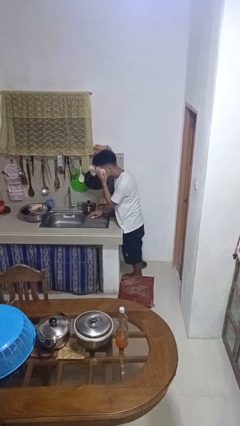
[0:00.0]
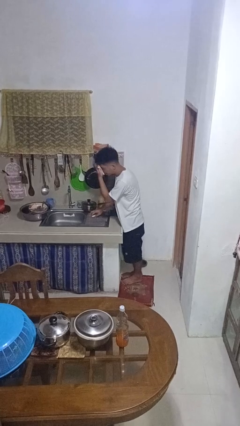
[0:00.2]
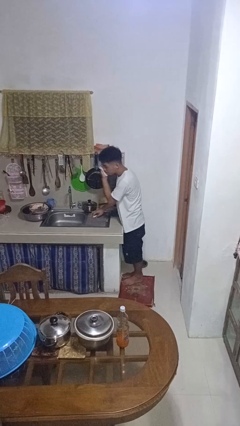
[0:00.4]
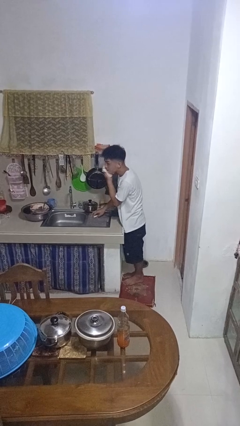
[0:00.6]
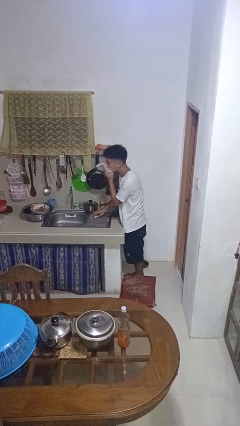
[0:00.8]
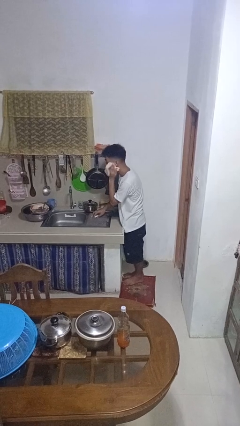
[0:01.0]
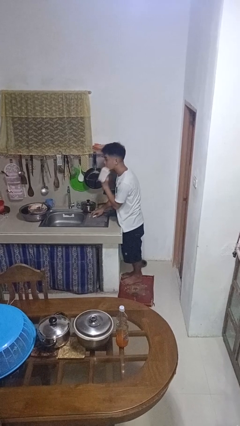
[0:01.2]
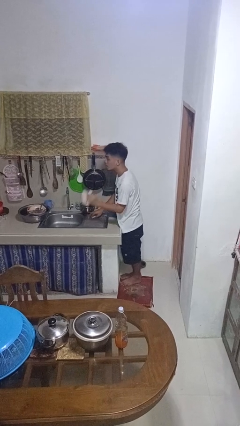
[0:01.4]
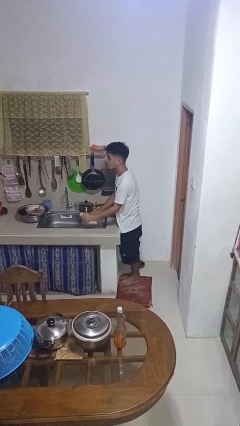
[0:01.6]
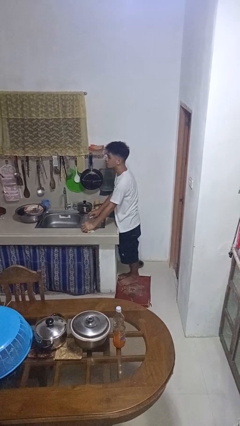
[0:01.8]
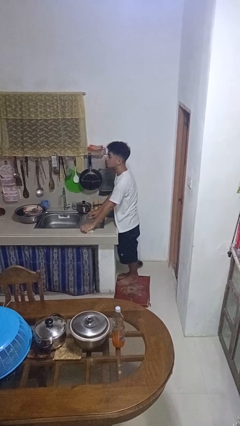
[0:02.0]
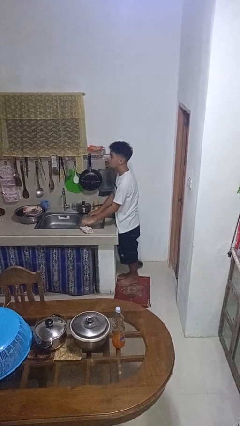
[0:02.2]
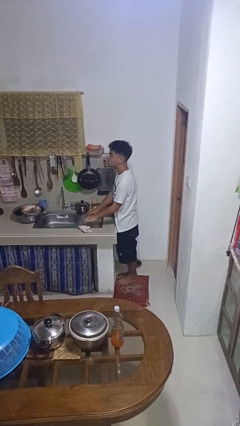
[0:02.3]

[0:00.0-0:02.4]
person dries face with towel

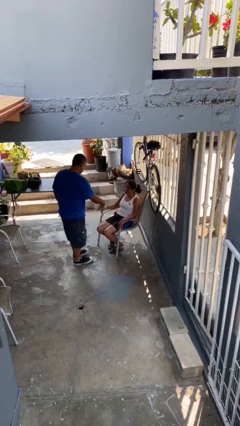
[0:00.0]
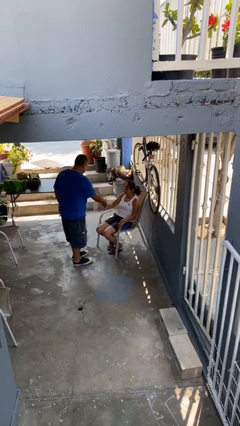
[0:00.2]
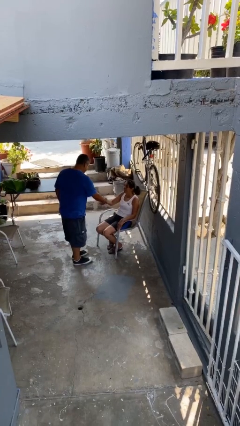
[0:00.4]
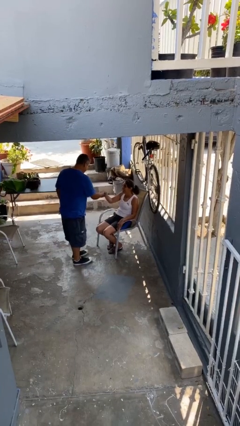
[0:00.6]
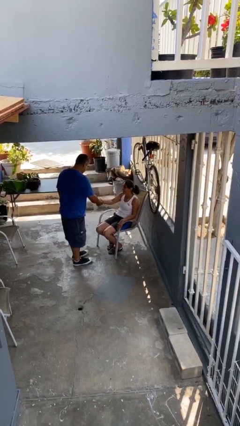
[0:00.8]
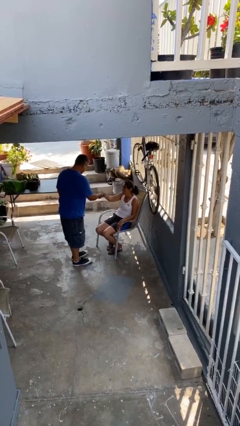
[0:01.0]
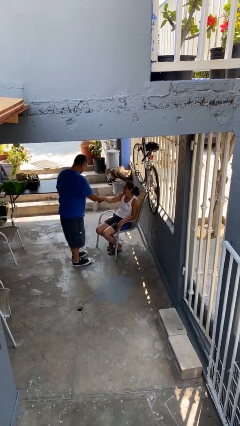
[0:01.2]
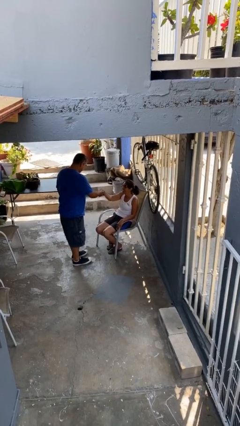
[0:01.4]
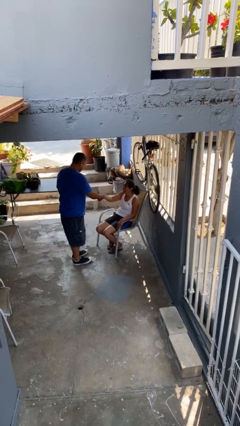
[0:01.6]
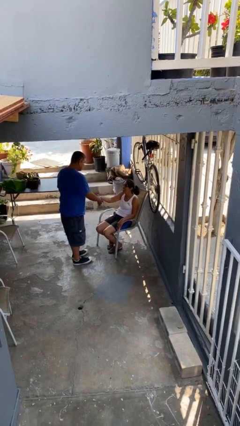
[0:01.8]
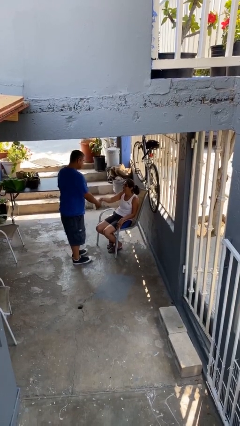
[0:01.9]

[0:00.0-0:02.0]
person shakes hand

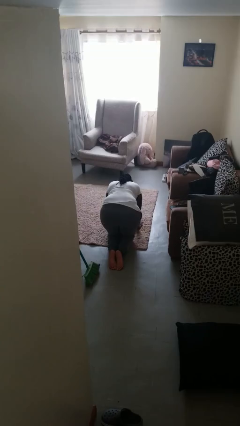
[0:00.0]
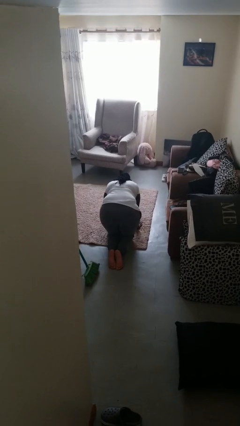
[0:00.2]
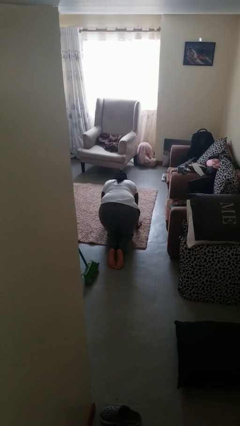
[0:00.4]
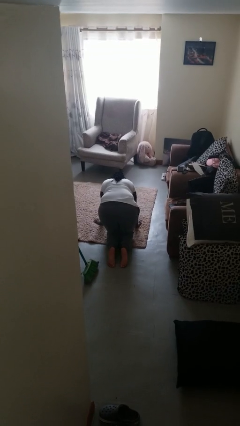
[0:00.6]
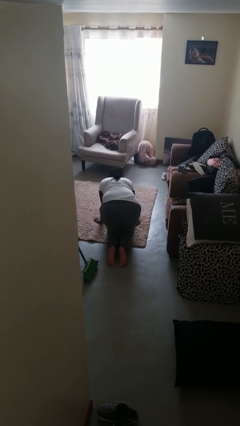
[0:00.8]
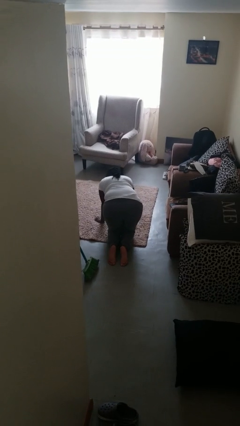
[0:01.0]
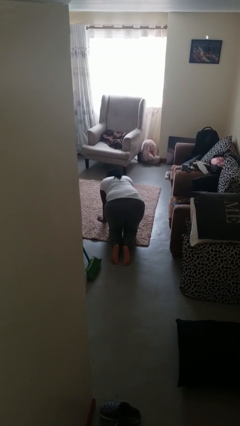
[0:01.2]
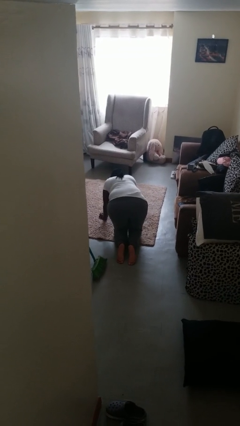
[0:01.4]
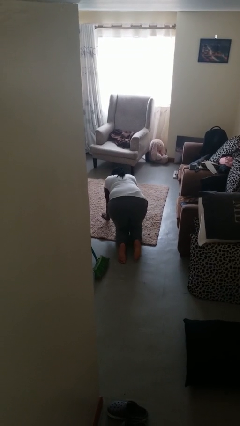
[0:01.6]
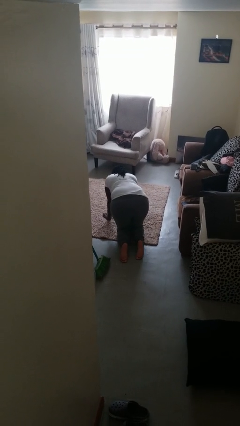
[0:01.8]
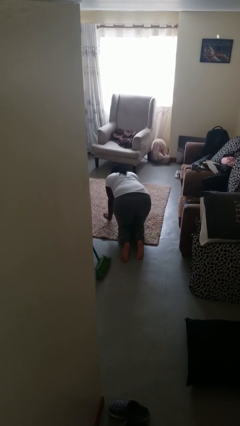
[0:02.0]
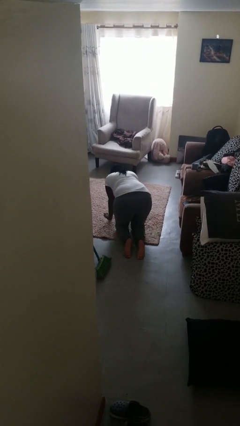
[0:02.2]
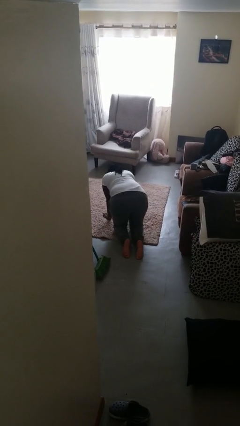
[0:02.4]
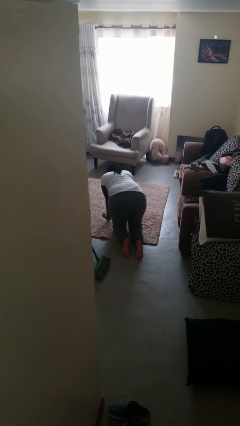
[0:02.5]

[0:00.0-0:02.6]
person crawls

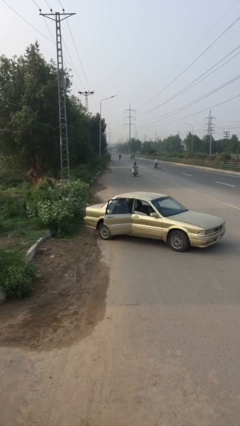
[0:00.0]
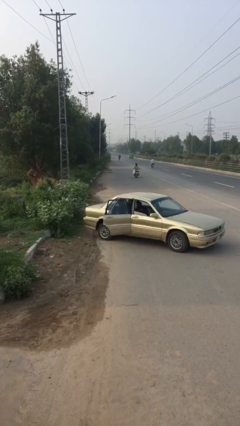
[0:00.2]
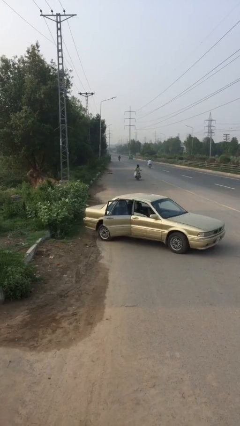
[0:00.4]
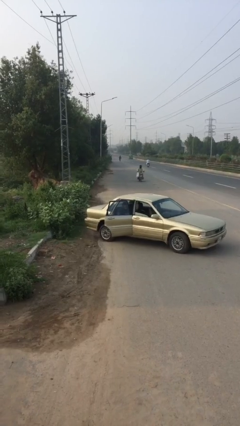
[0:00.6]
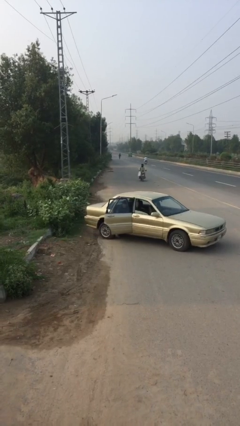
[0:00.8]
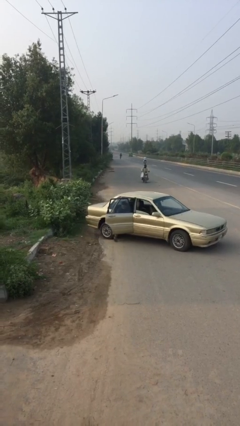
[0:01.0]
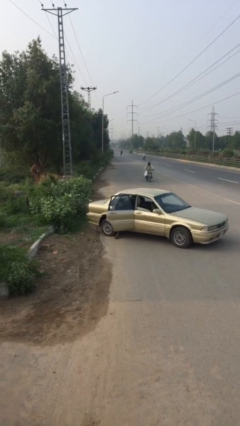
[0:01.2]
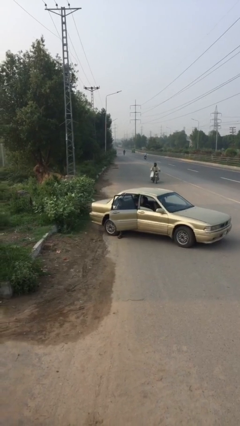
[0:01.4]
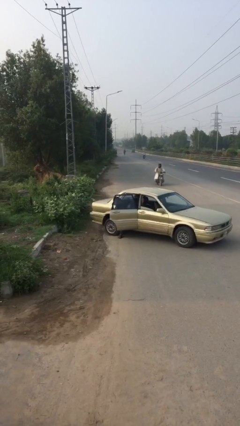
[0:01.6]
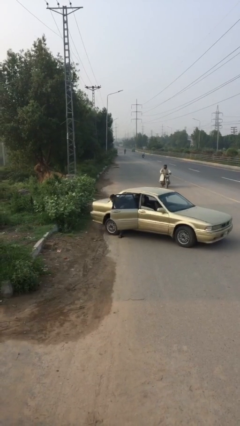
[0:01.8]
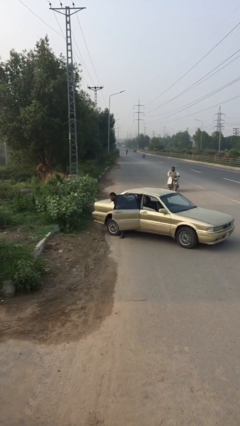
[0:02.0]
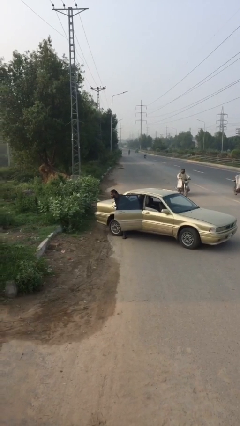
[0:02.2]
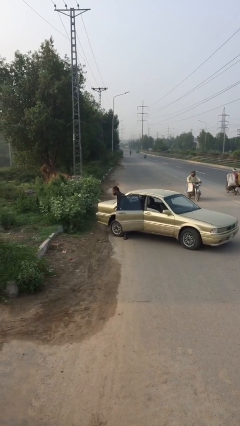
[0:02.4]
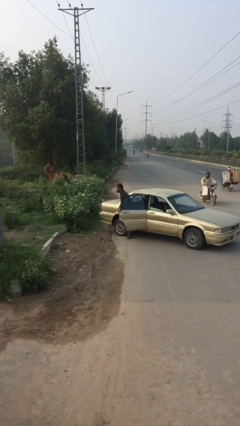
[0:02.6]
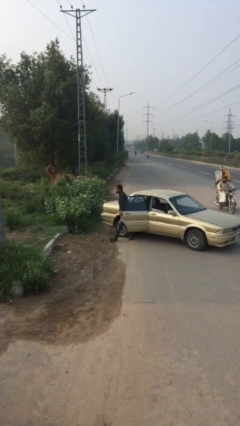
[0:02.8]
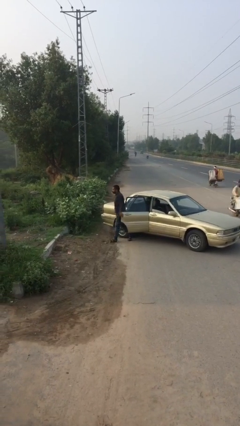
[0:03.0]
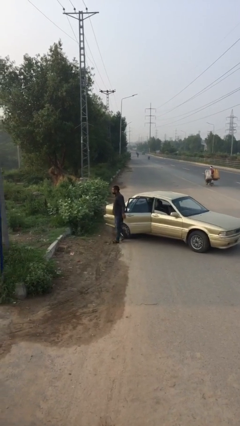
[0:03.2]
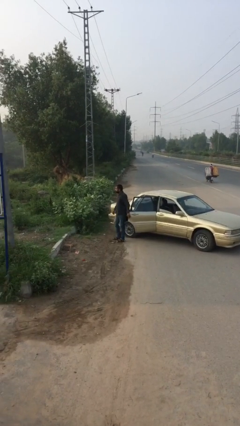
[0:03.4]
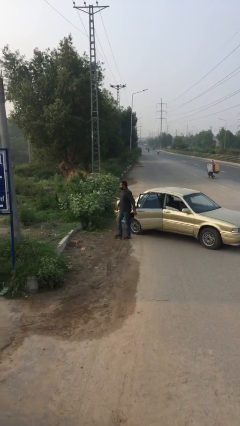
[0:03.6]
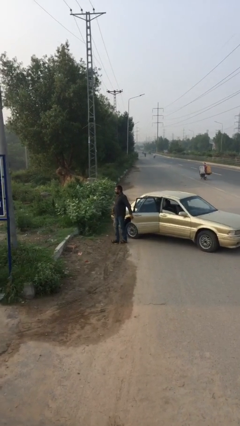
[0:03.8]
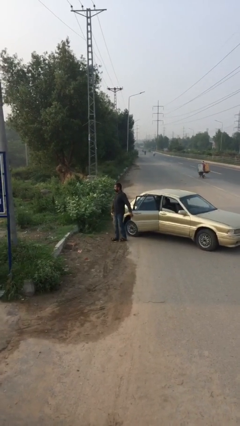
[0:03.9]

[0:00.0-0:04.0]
person exits car

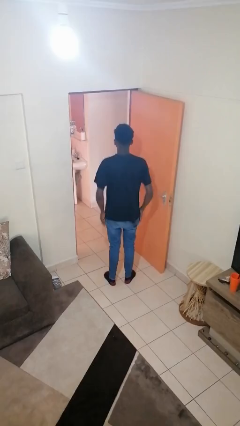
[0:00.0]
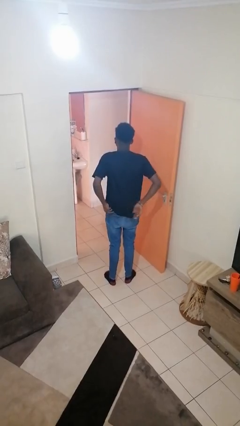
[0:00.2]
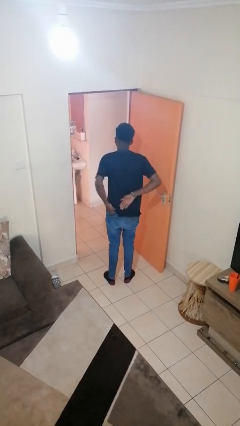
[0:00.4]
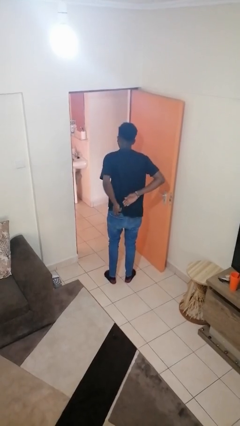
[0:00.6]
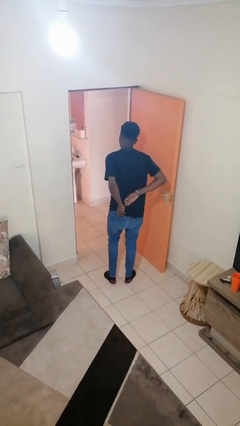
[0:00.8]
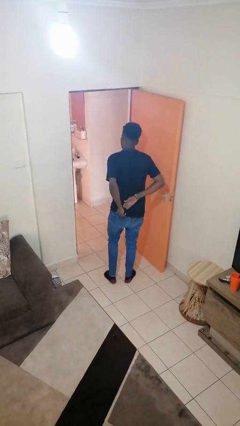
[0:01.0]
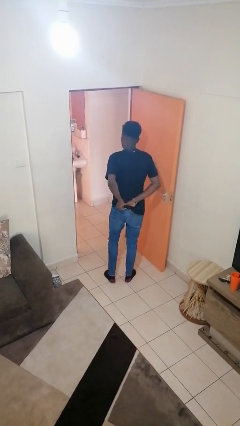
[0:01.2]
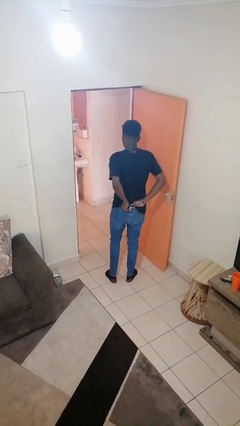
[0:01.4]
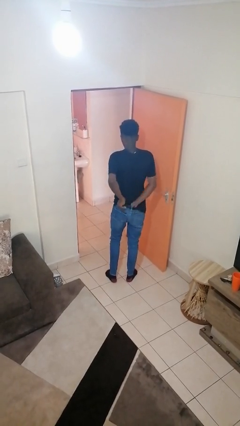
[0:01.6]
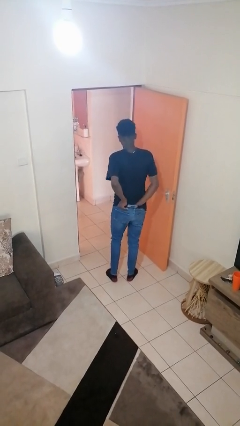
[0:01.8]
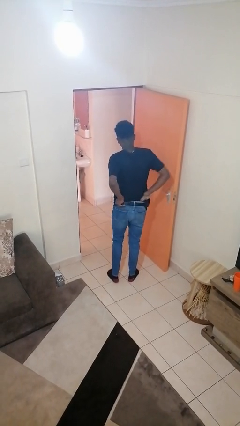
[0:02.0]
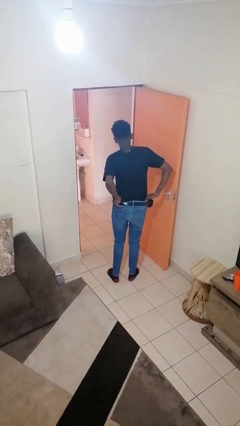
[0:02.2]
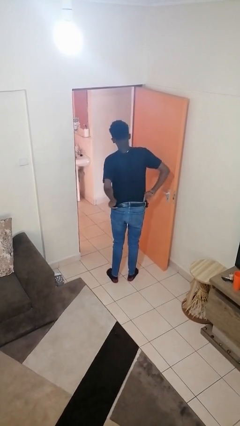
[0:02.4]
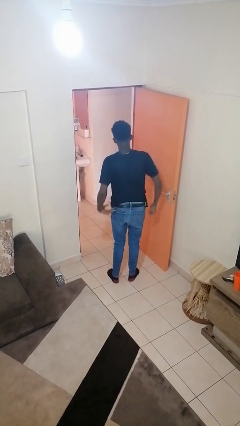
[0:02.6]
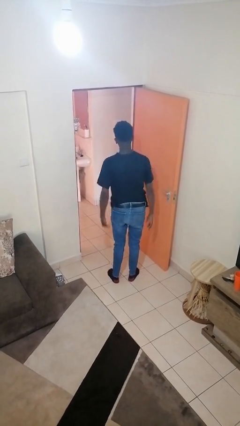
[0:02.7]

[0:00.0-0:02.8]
person tucks in shirt

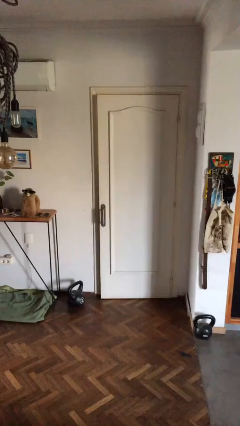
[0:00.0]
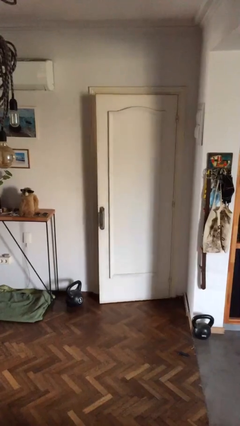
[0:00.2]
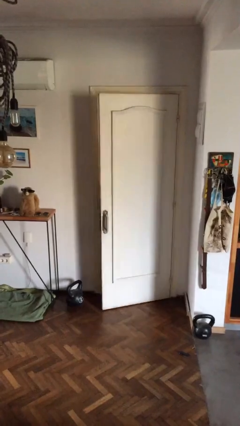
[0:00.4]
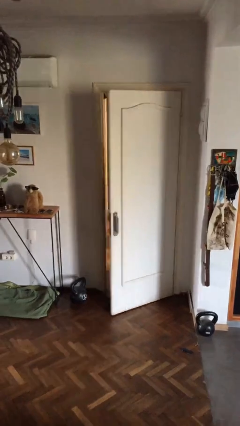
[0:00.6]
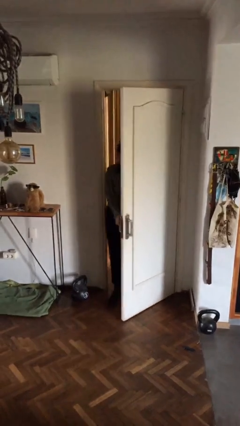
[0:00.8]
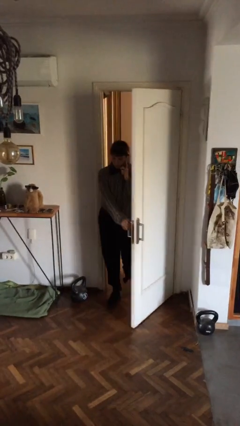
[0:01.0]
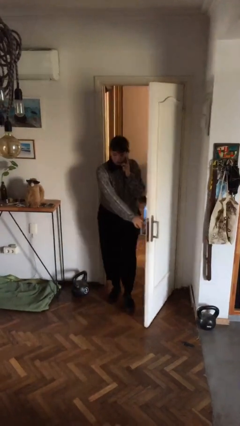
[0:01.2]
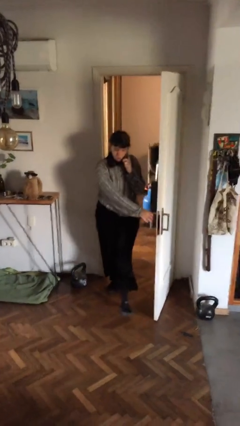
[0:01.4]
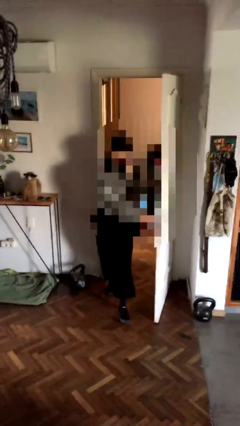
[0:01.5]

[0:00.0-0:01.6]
person opens facility door

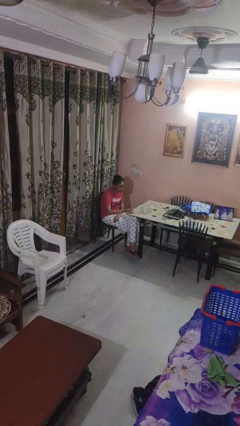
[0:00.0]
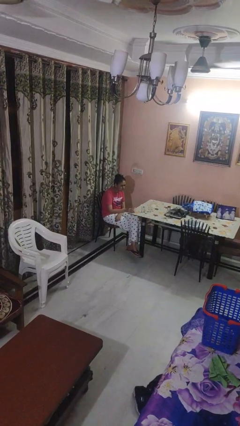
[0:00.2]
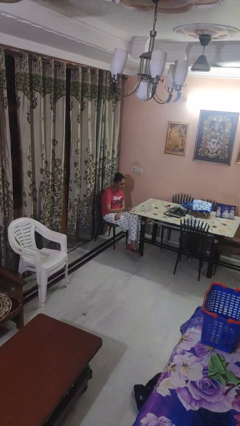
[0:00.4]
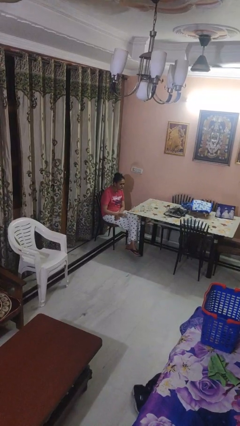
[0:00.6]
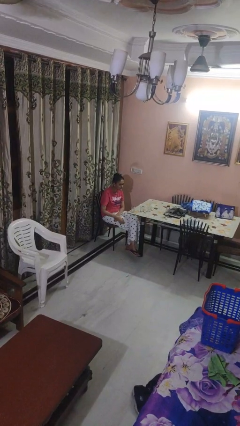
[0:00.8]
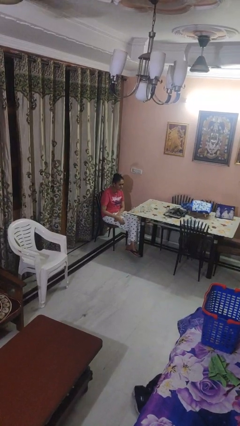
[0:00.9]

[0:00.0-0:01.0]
person puts down object on table

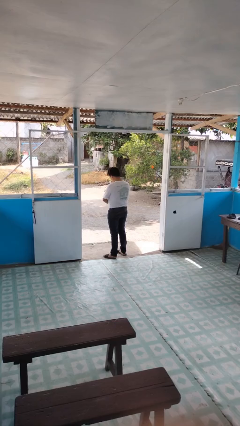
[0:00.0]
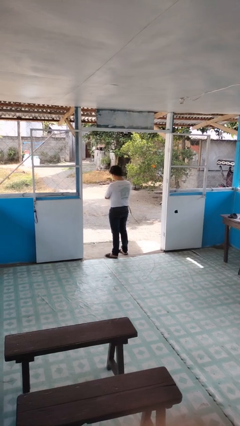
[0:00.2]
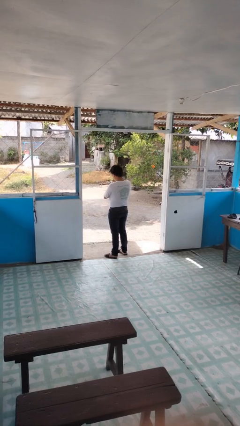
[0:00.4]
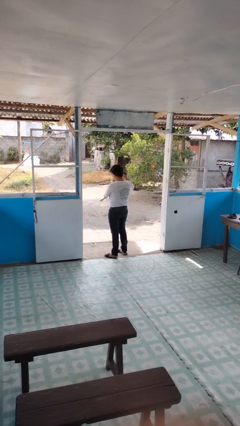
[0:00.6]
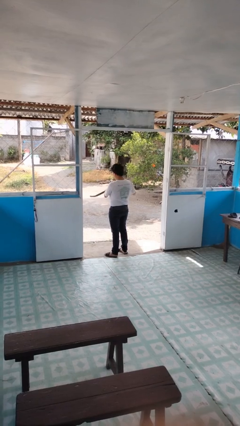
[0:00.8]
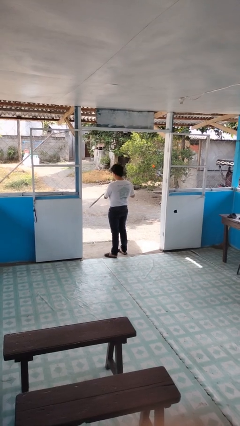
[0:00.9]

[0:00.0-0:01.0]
person takes off belt
